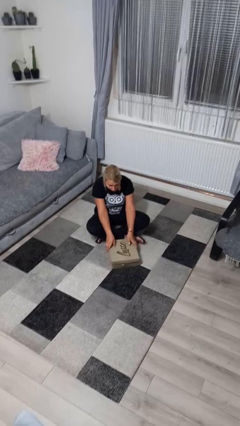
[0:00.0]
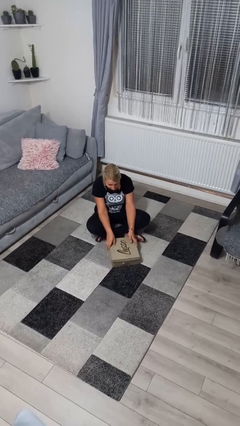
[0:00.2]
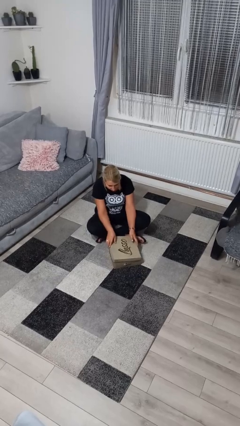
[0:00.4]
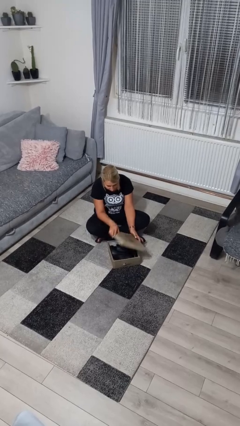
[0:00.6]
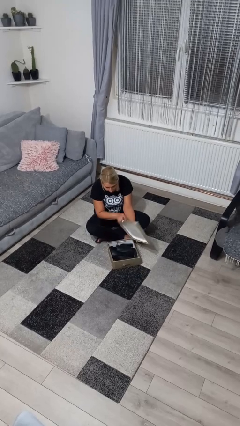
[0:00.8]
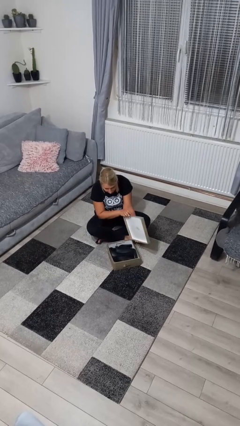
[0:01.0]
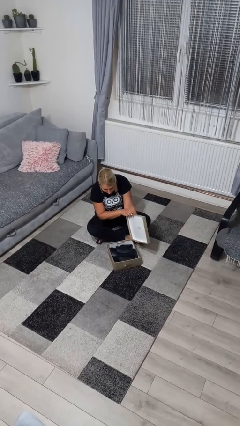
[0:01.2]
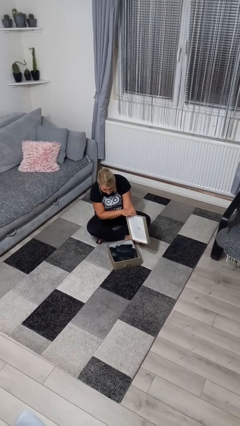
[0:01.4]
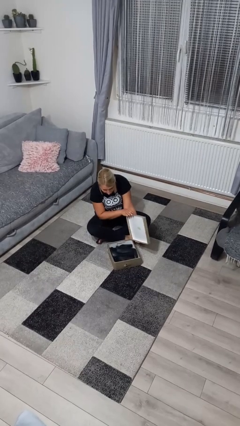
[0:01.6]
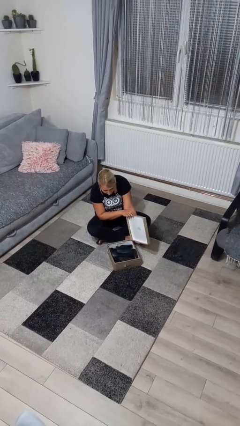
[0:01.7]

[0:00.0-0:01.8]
person opens box

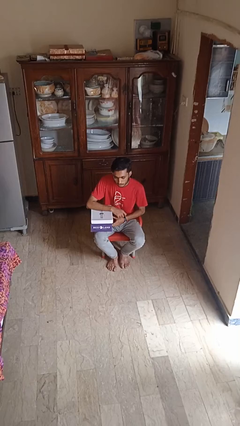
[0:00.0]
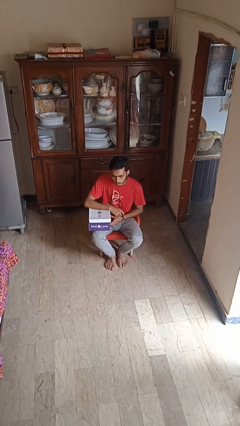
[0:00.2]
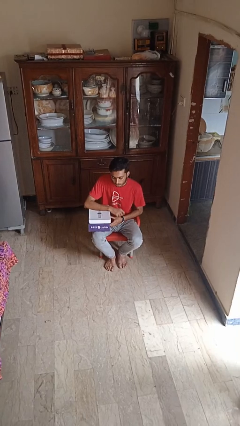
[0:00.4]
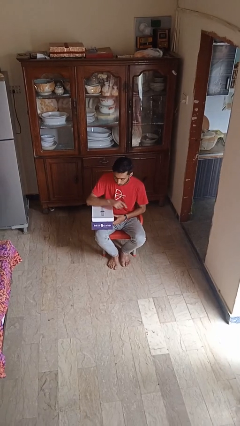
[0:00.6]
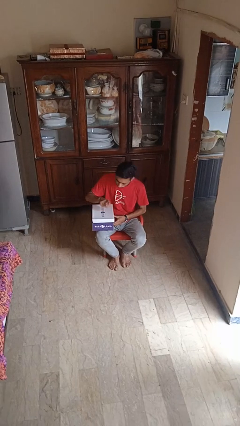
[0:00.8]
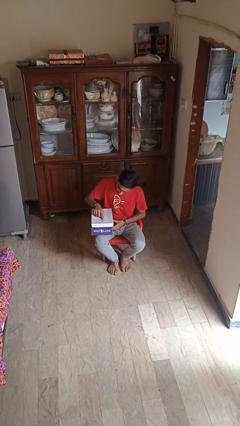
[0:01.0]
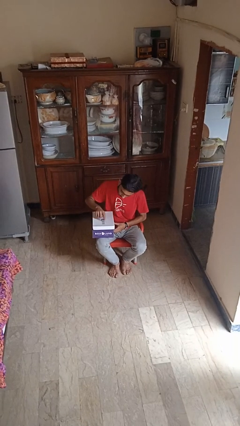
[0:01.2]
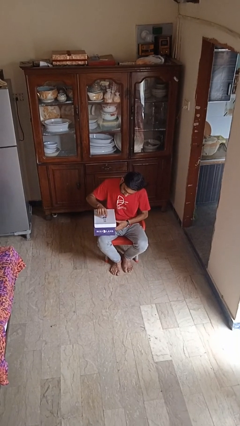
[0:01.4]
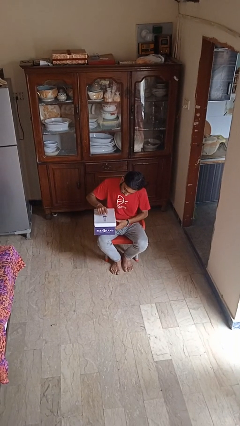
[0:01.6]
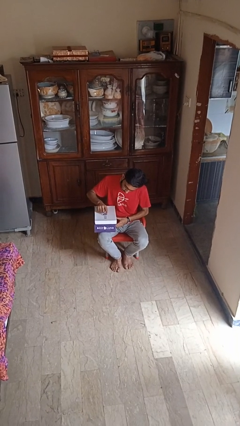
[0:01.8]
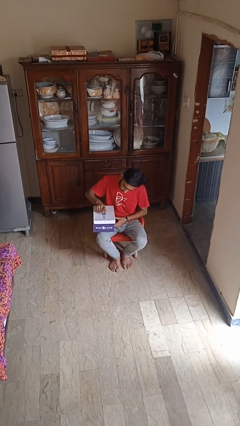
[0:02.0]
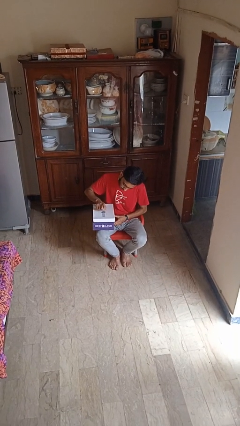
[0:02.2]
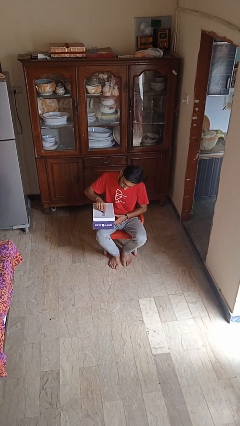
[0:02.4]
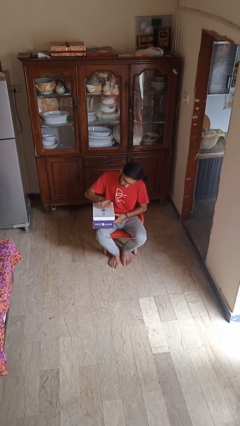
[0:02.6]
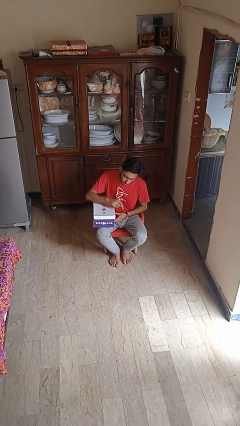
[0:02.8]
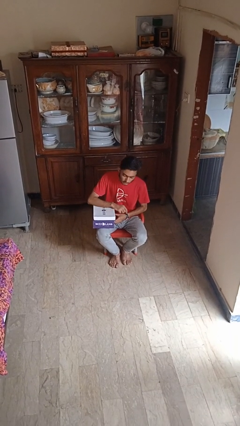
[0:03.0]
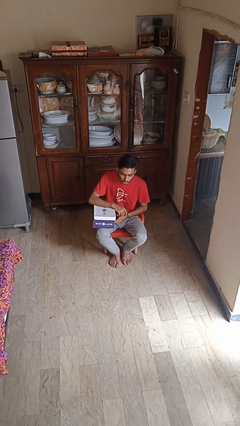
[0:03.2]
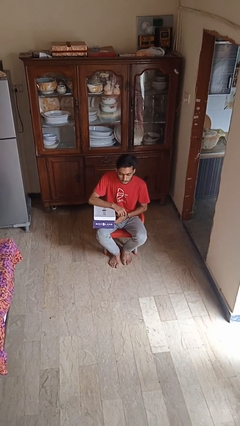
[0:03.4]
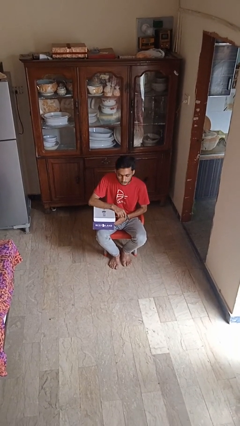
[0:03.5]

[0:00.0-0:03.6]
person taps object with finger

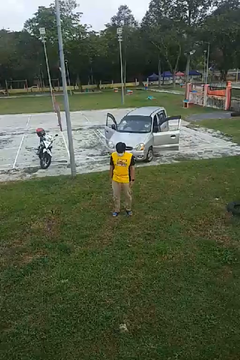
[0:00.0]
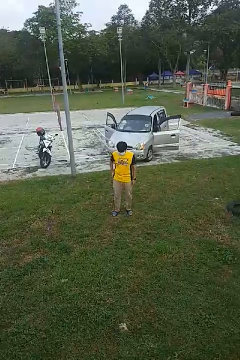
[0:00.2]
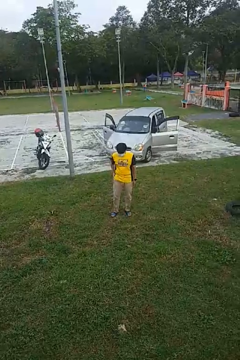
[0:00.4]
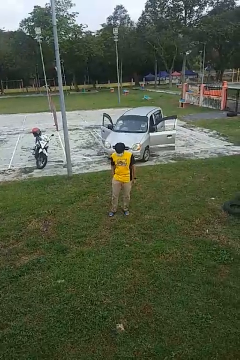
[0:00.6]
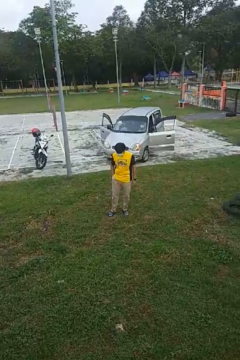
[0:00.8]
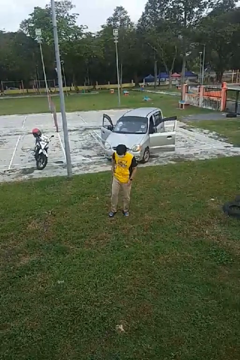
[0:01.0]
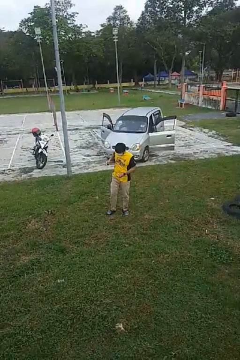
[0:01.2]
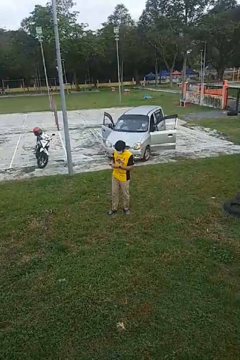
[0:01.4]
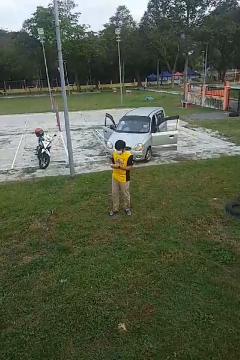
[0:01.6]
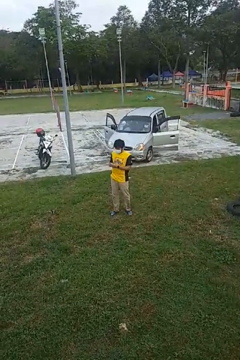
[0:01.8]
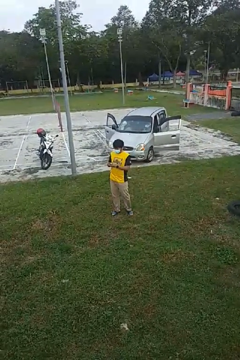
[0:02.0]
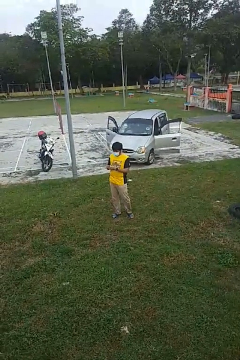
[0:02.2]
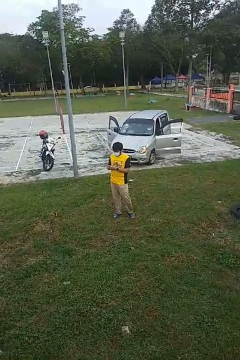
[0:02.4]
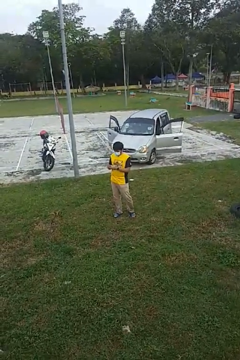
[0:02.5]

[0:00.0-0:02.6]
person takes phone from pocket

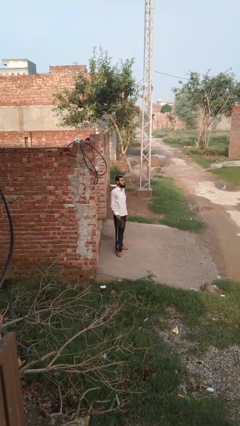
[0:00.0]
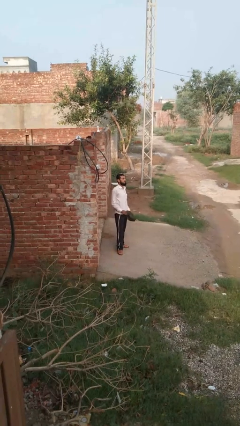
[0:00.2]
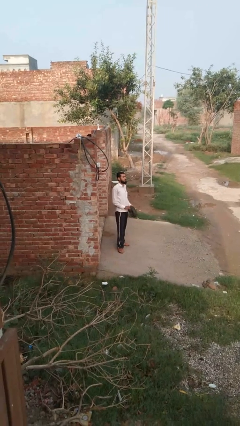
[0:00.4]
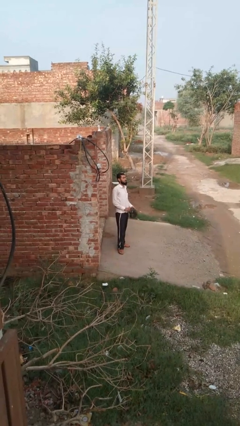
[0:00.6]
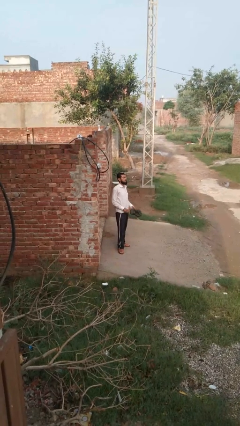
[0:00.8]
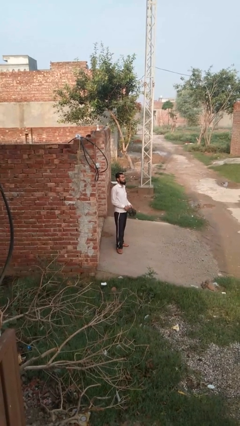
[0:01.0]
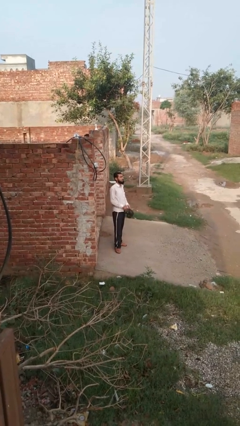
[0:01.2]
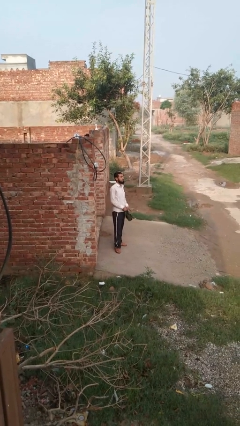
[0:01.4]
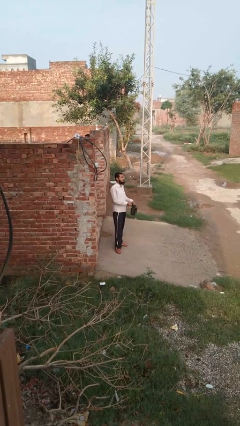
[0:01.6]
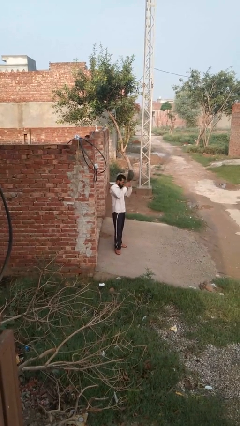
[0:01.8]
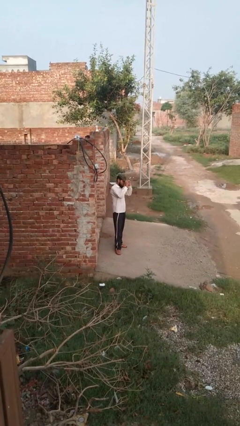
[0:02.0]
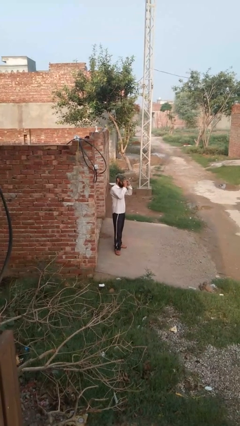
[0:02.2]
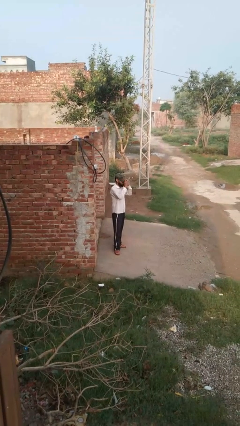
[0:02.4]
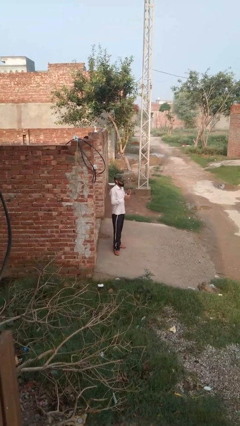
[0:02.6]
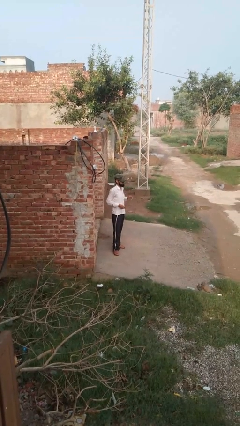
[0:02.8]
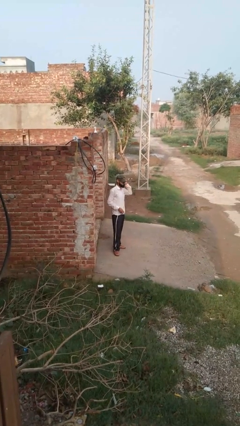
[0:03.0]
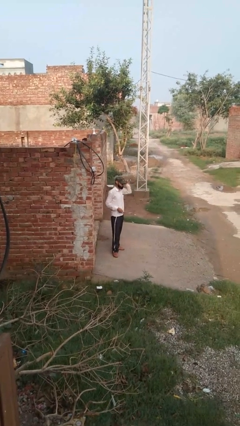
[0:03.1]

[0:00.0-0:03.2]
person puts on hat

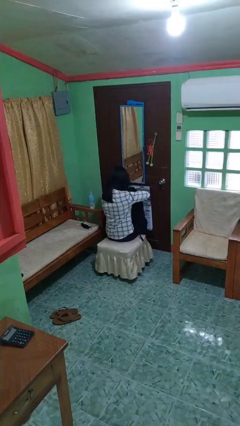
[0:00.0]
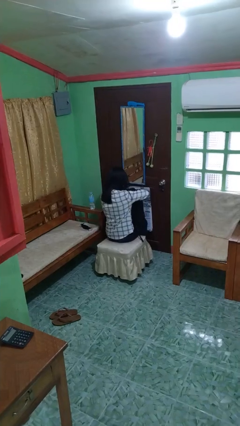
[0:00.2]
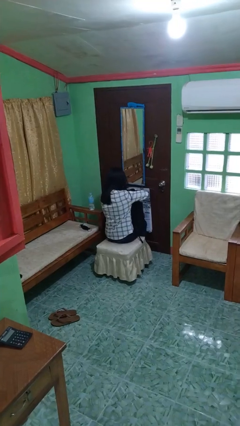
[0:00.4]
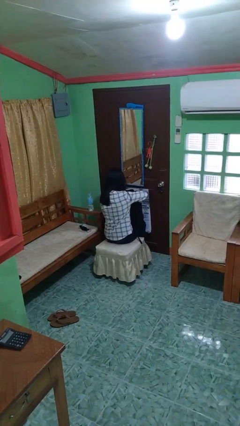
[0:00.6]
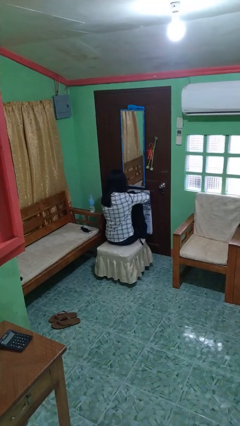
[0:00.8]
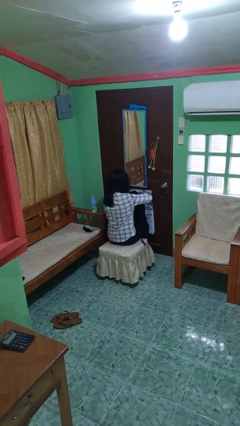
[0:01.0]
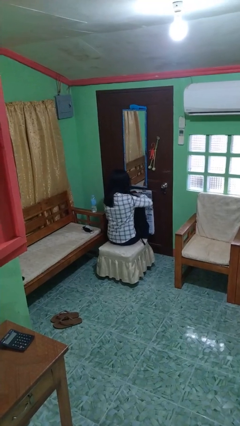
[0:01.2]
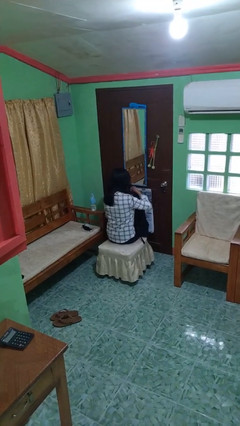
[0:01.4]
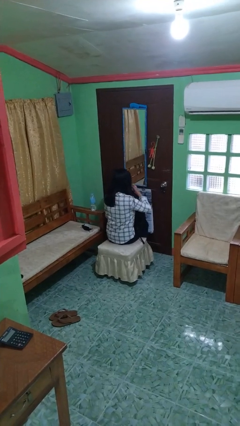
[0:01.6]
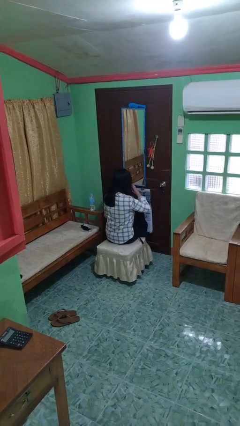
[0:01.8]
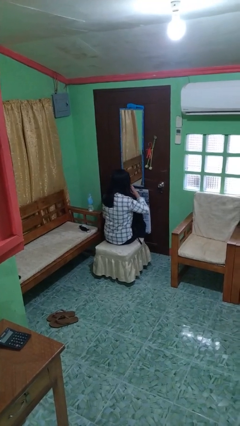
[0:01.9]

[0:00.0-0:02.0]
person eats snack from bag

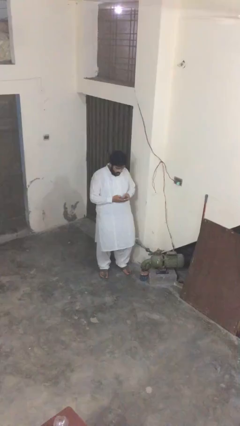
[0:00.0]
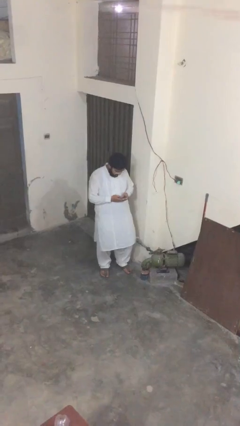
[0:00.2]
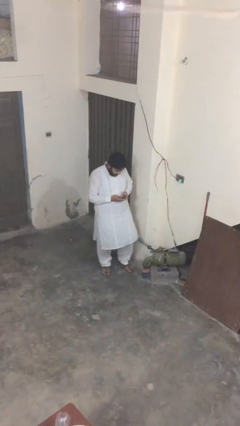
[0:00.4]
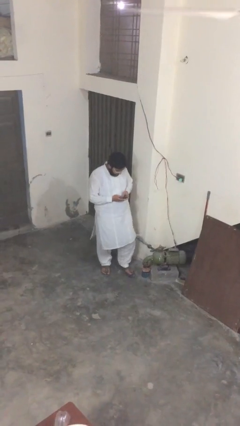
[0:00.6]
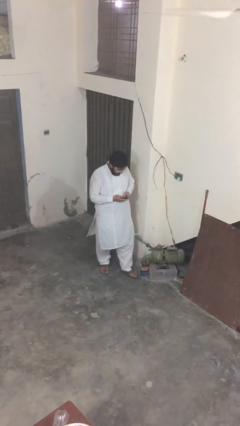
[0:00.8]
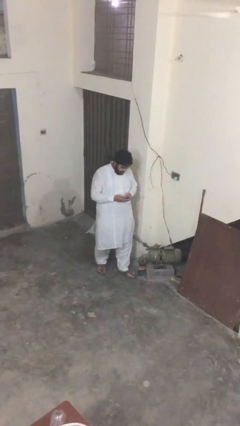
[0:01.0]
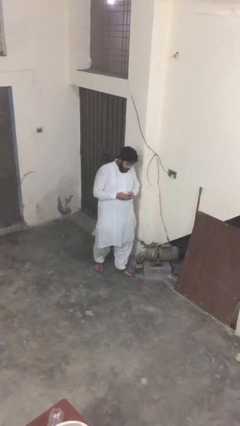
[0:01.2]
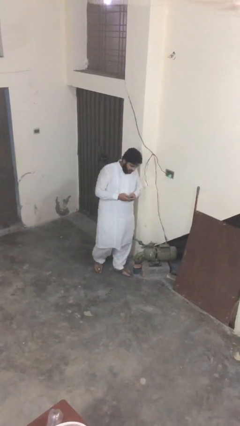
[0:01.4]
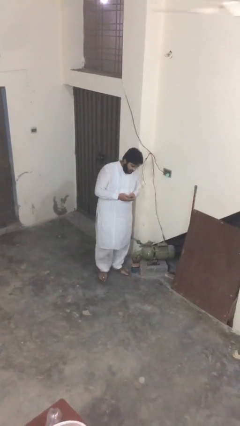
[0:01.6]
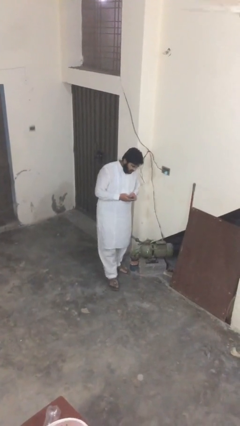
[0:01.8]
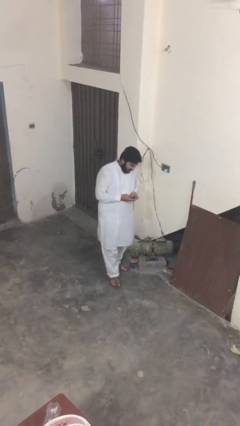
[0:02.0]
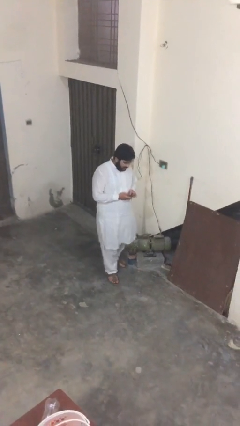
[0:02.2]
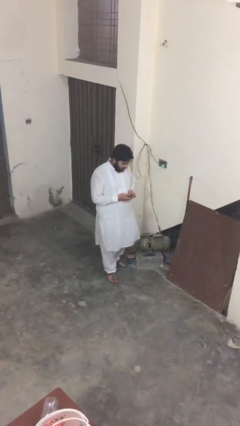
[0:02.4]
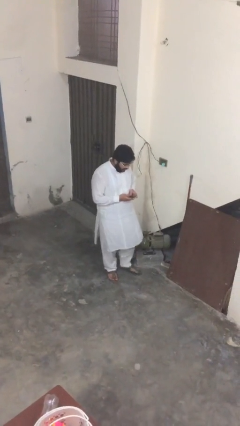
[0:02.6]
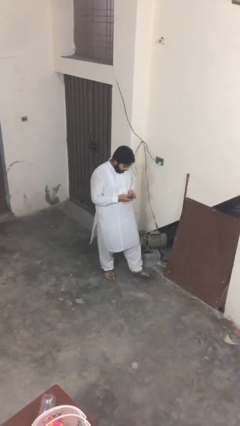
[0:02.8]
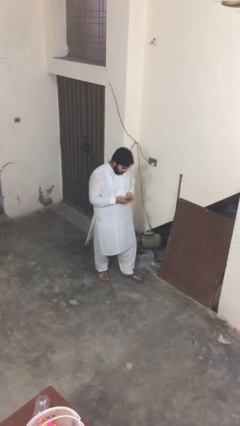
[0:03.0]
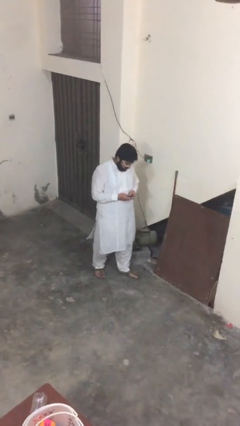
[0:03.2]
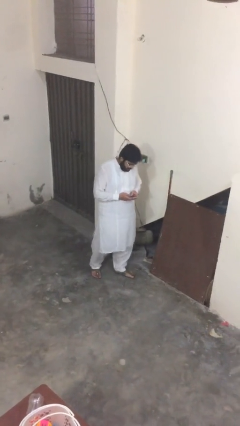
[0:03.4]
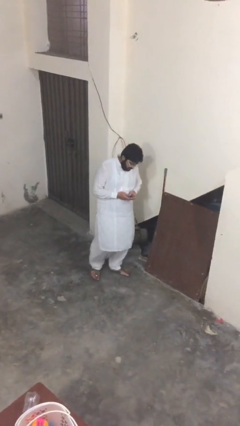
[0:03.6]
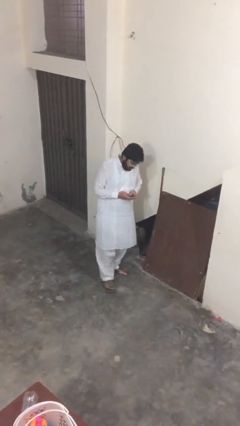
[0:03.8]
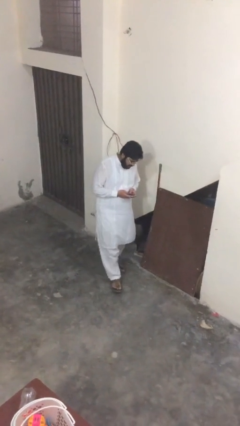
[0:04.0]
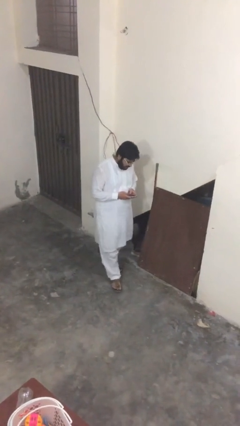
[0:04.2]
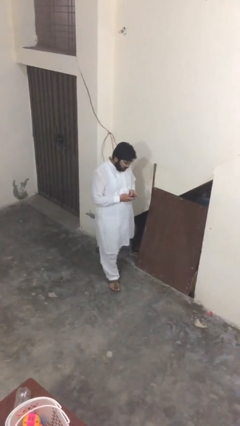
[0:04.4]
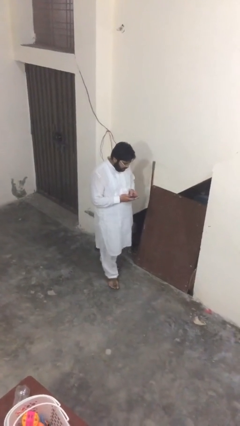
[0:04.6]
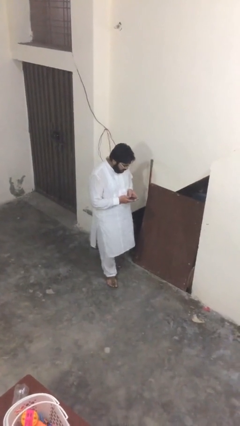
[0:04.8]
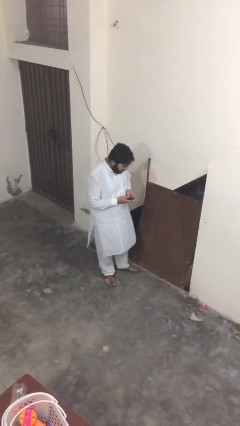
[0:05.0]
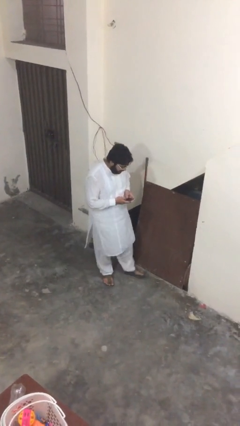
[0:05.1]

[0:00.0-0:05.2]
person texts on phone
